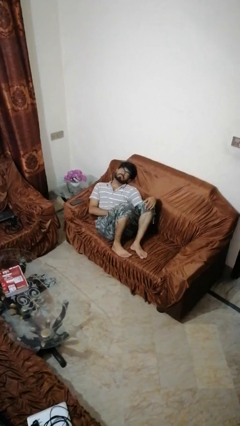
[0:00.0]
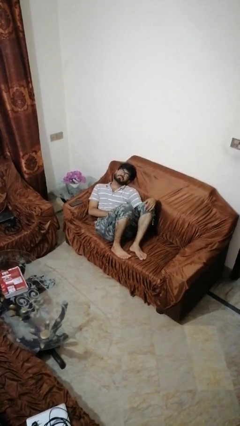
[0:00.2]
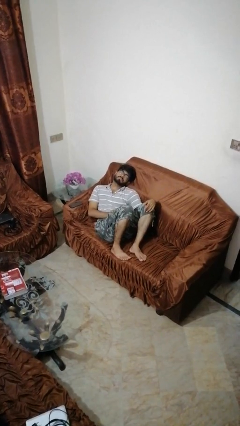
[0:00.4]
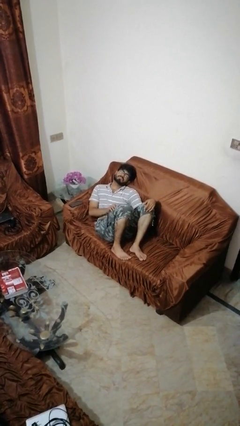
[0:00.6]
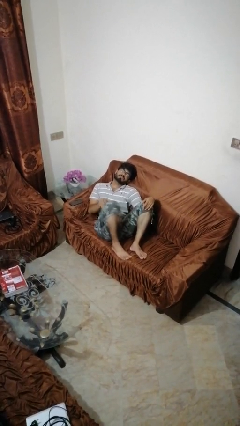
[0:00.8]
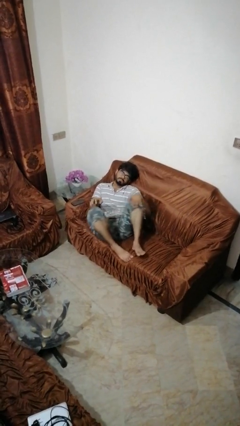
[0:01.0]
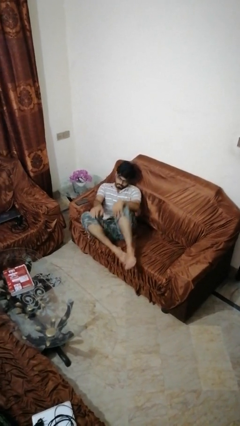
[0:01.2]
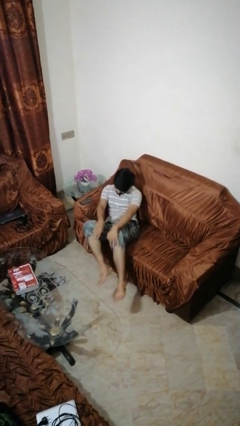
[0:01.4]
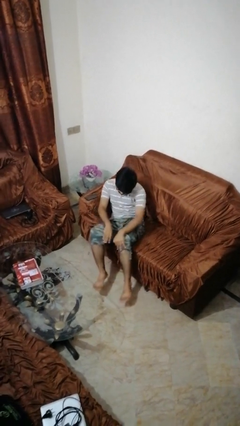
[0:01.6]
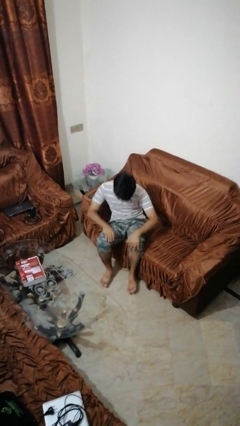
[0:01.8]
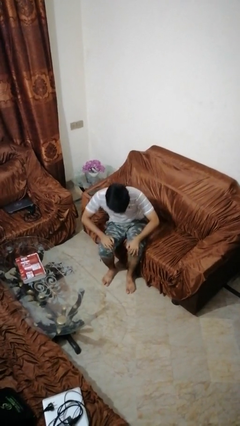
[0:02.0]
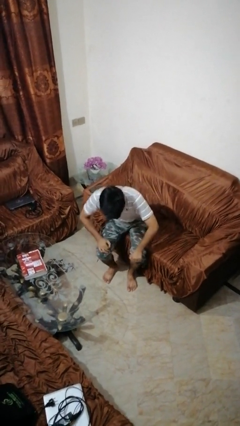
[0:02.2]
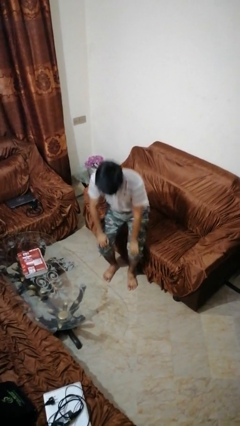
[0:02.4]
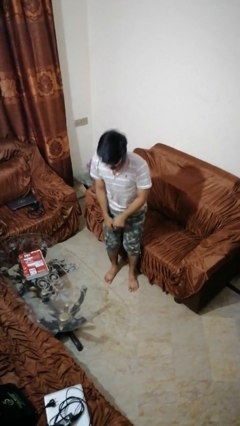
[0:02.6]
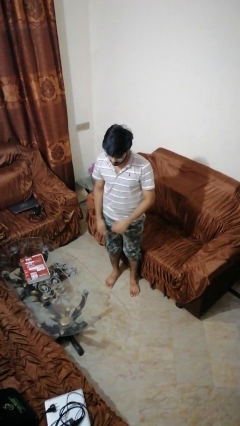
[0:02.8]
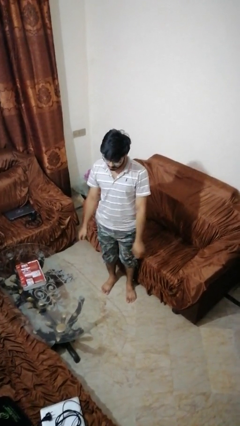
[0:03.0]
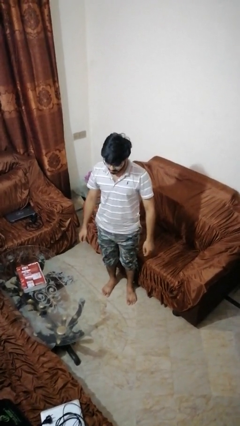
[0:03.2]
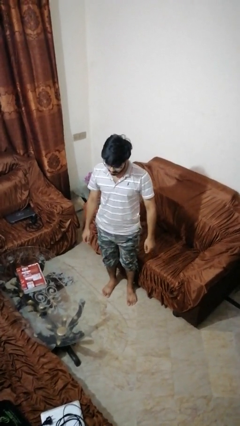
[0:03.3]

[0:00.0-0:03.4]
person stands up

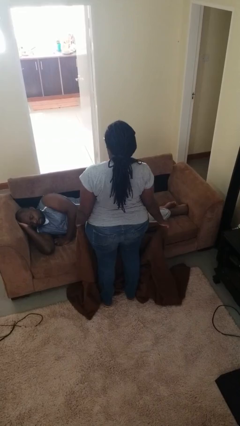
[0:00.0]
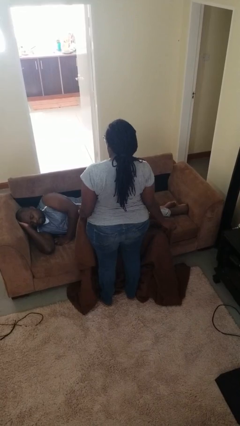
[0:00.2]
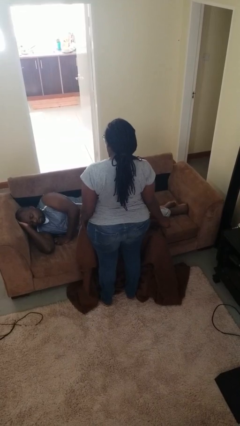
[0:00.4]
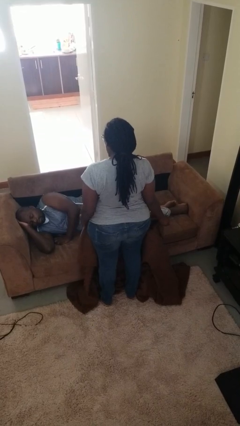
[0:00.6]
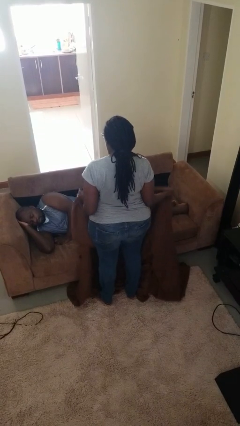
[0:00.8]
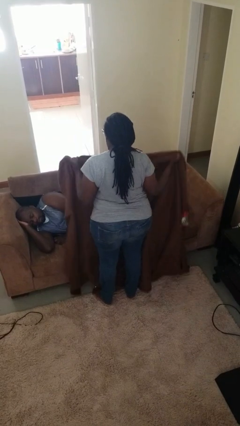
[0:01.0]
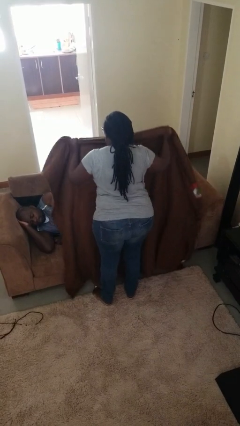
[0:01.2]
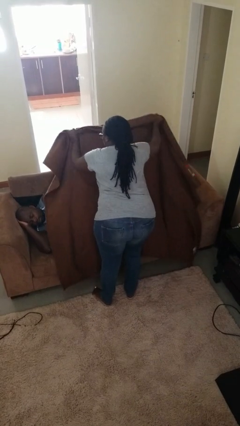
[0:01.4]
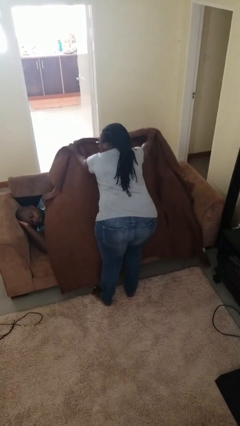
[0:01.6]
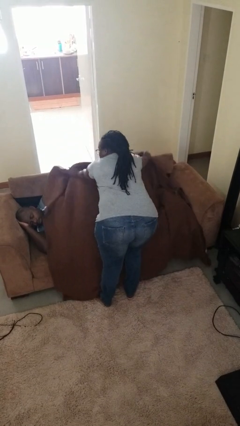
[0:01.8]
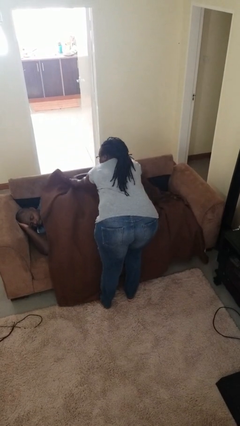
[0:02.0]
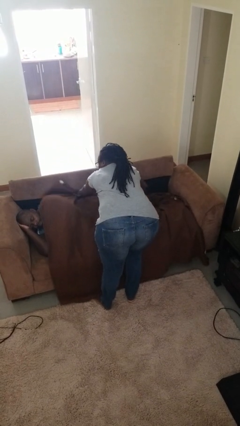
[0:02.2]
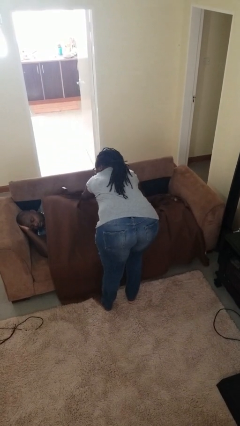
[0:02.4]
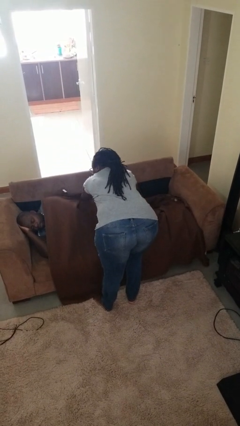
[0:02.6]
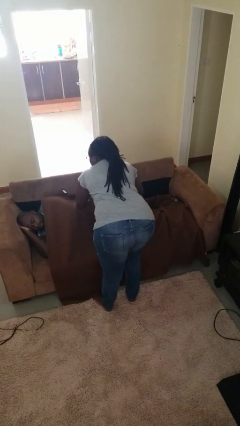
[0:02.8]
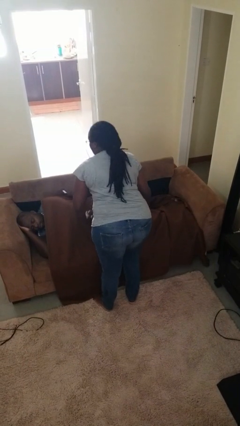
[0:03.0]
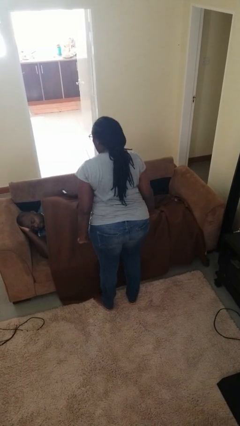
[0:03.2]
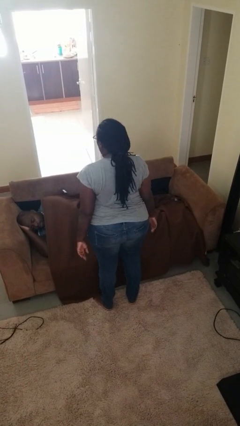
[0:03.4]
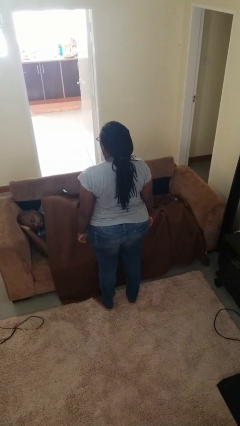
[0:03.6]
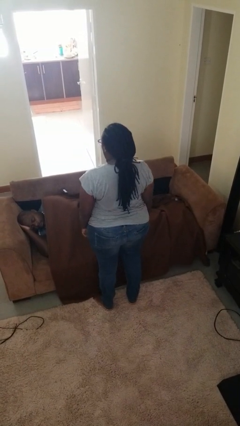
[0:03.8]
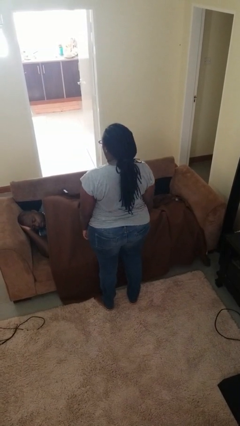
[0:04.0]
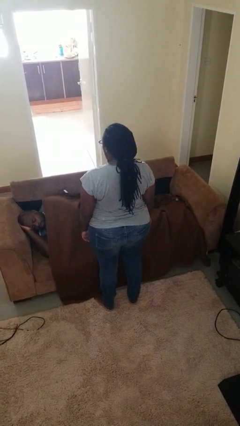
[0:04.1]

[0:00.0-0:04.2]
person covers friend with blanket

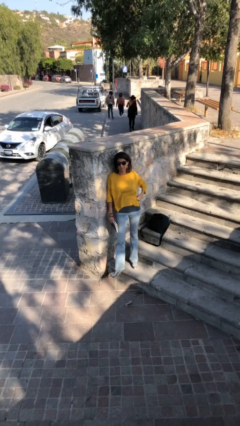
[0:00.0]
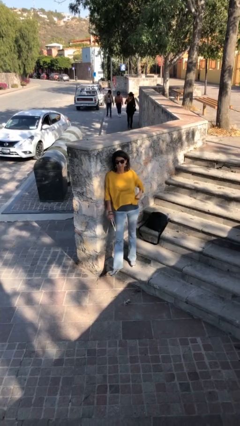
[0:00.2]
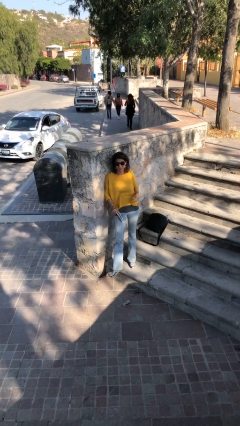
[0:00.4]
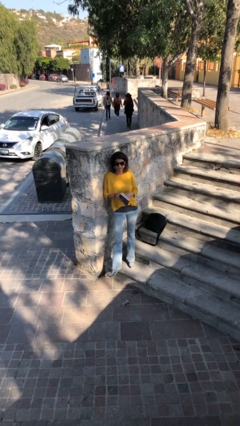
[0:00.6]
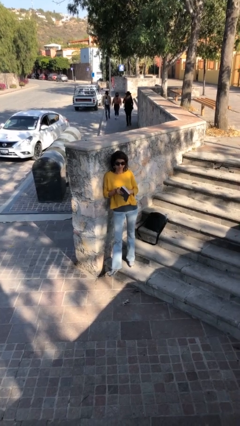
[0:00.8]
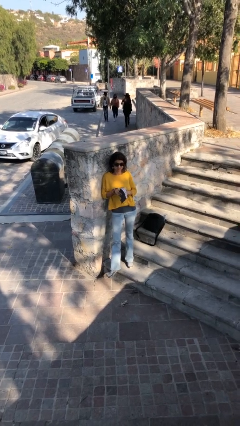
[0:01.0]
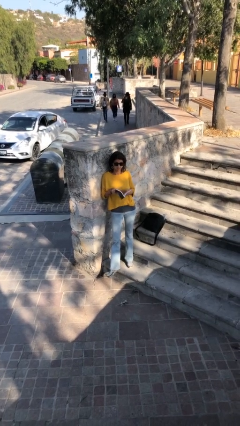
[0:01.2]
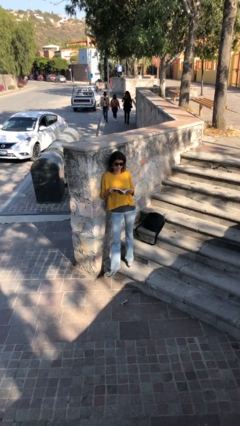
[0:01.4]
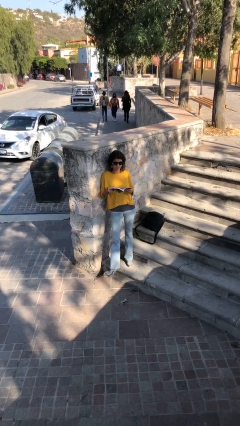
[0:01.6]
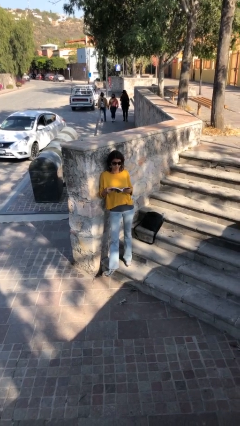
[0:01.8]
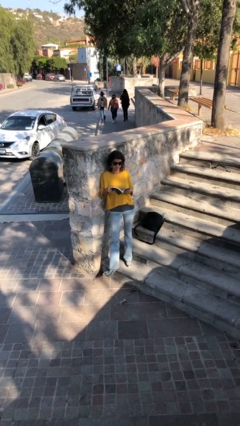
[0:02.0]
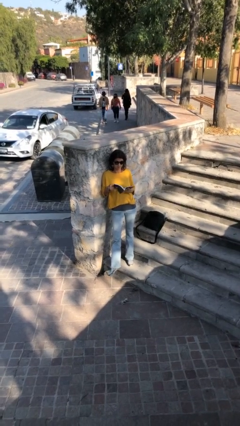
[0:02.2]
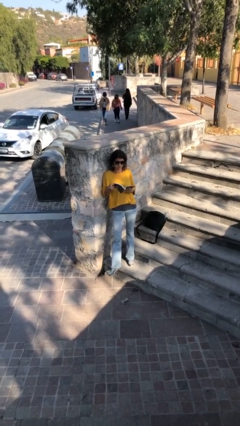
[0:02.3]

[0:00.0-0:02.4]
person reads document

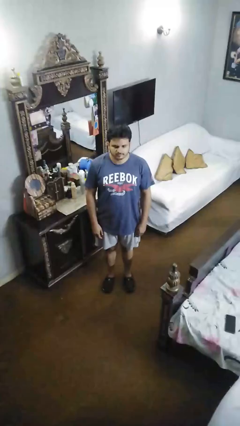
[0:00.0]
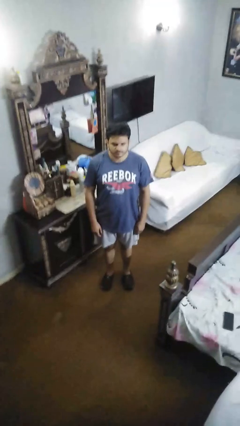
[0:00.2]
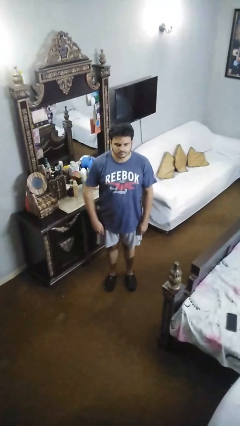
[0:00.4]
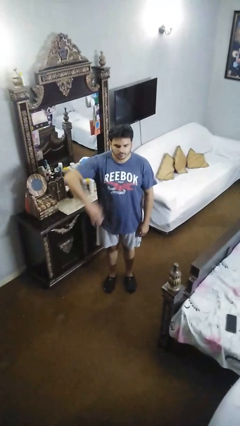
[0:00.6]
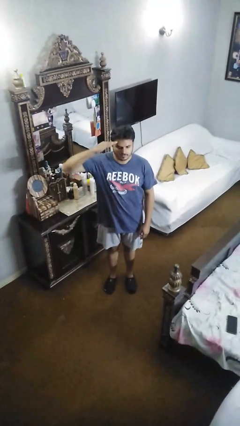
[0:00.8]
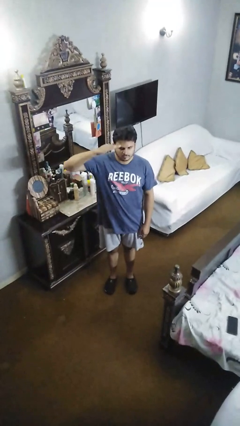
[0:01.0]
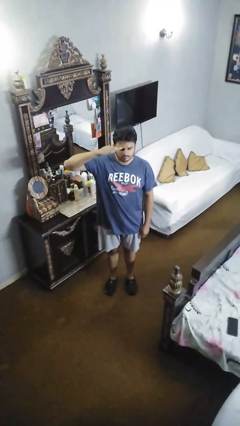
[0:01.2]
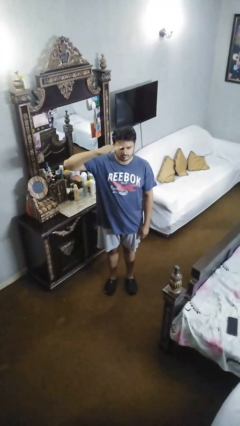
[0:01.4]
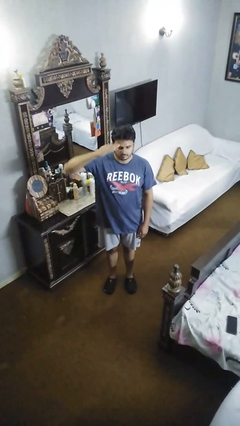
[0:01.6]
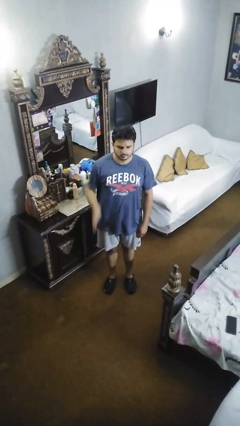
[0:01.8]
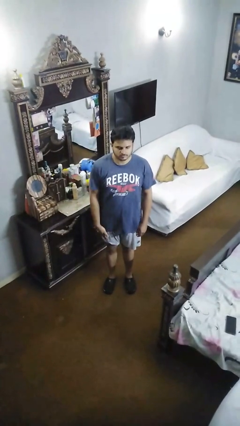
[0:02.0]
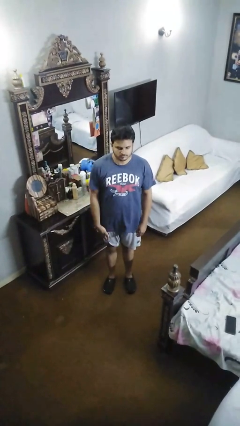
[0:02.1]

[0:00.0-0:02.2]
person salutes

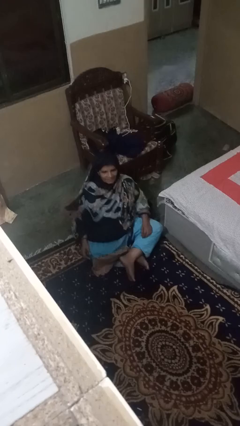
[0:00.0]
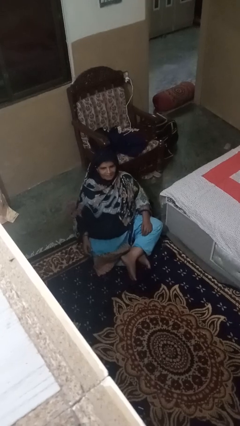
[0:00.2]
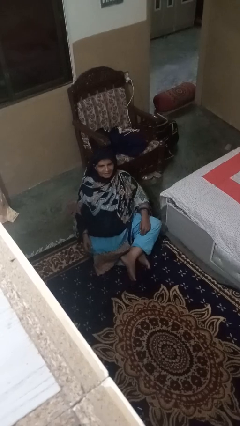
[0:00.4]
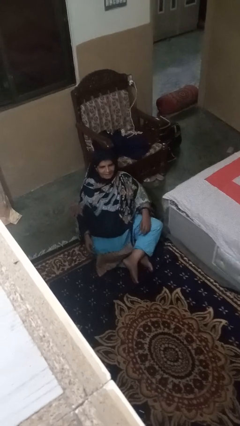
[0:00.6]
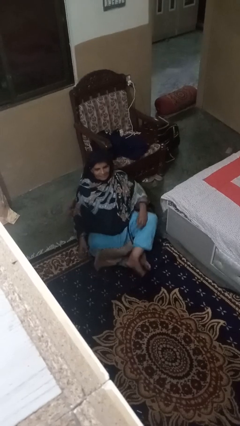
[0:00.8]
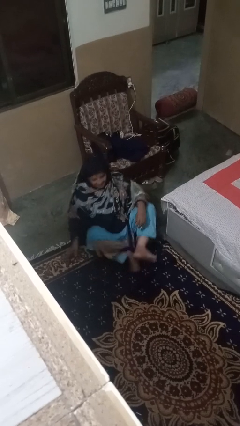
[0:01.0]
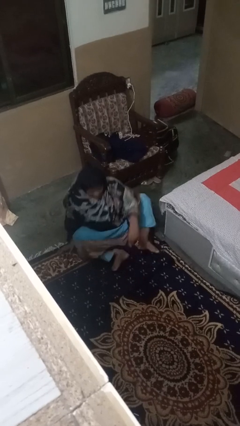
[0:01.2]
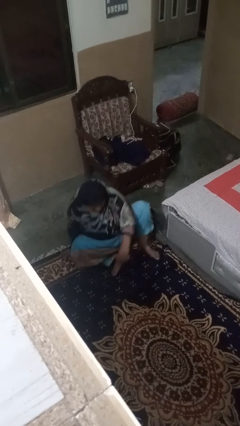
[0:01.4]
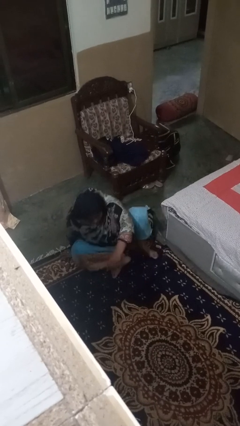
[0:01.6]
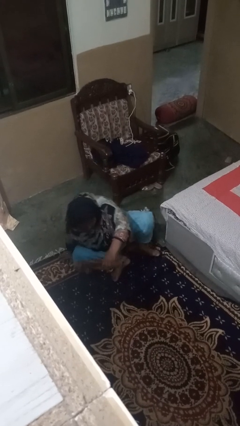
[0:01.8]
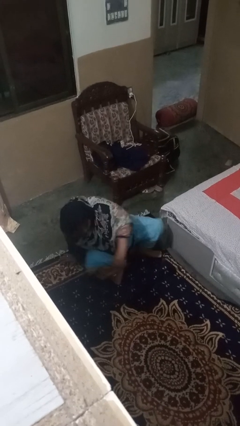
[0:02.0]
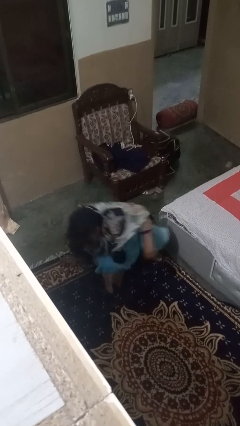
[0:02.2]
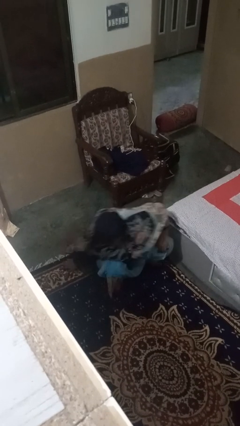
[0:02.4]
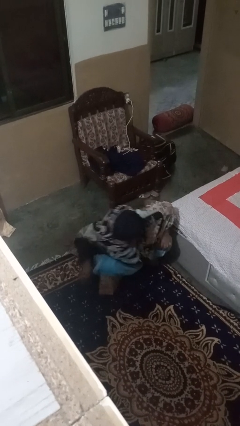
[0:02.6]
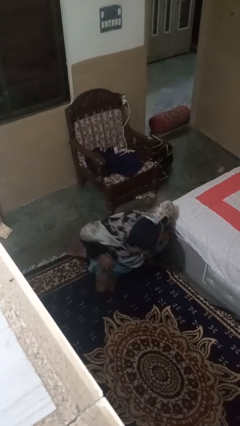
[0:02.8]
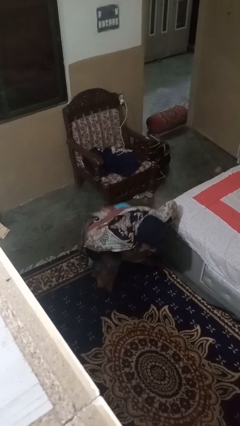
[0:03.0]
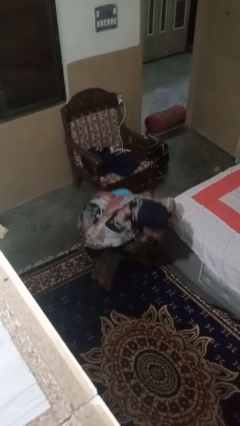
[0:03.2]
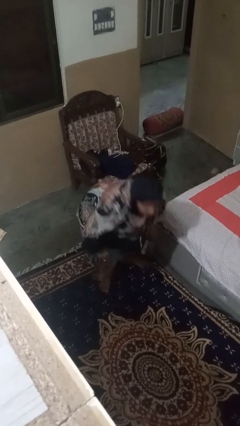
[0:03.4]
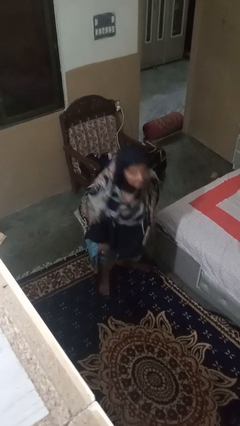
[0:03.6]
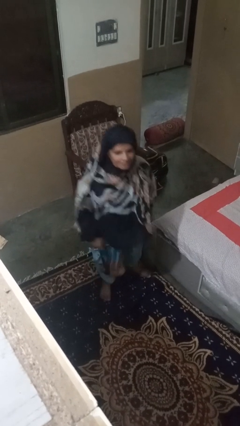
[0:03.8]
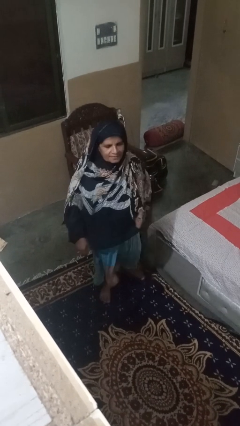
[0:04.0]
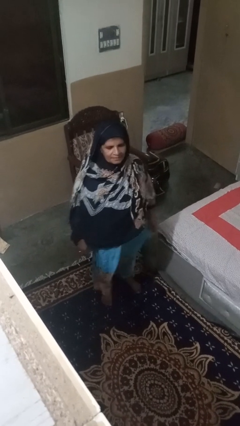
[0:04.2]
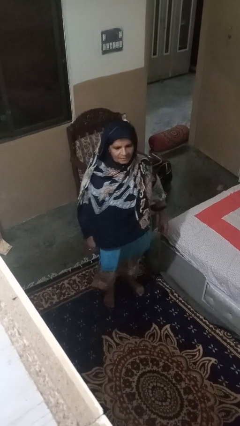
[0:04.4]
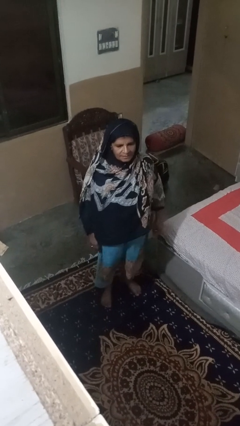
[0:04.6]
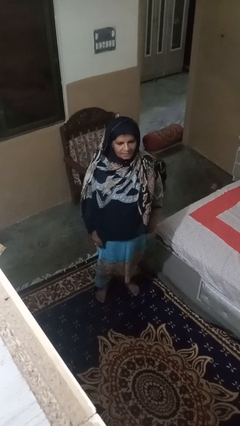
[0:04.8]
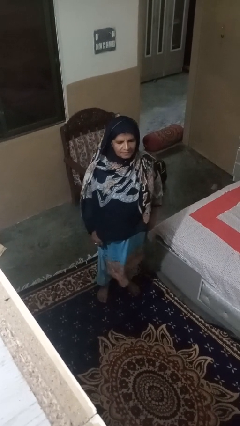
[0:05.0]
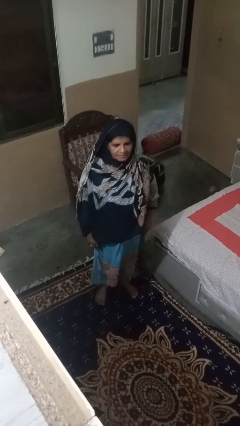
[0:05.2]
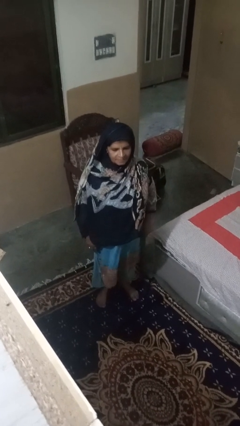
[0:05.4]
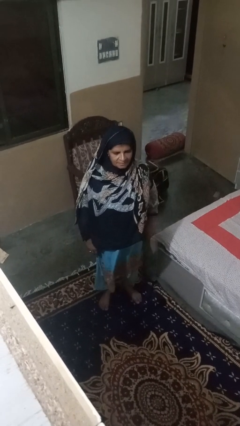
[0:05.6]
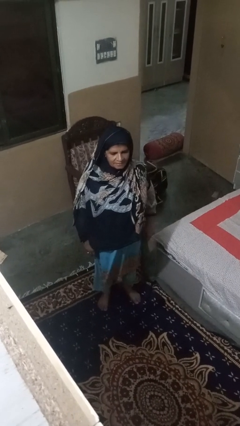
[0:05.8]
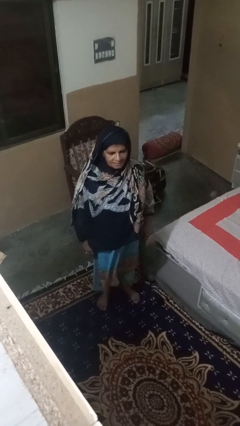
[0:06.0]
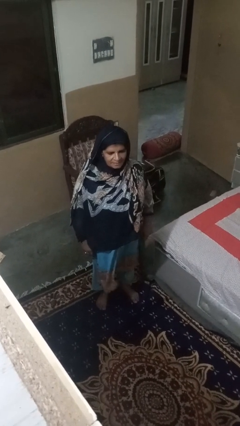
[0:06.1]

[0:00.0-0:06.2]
person stands up from floor
